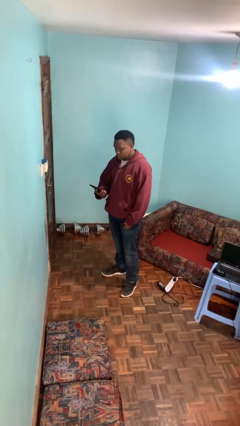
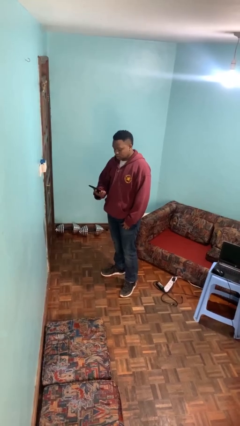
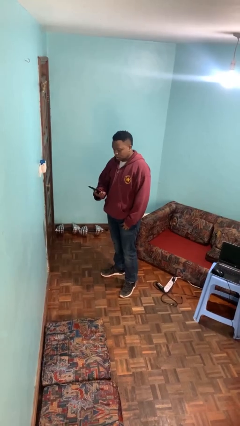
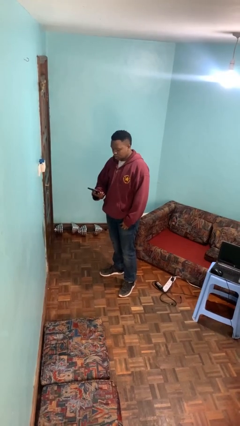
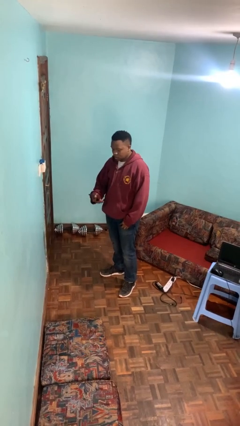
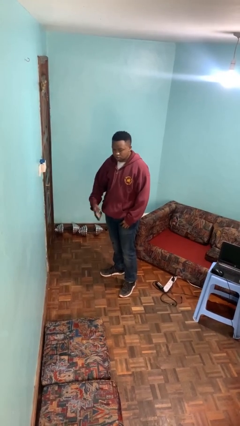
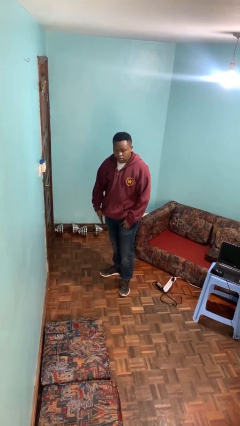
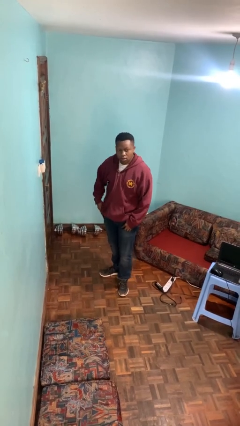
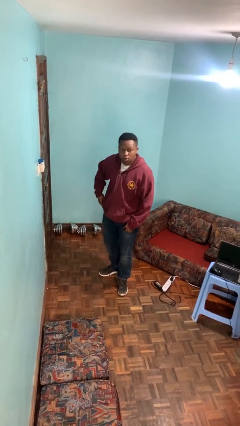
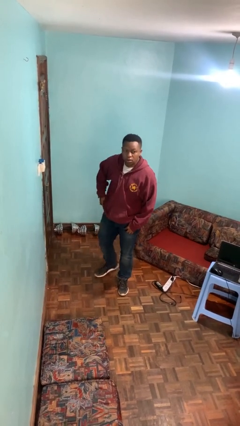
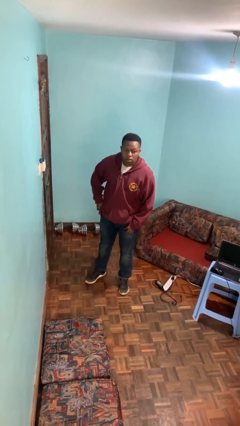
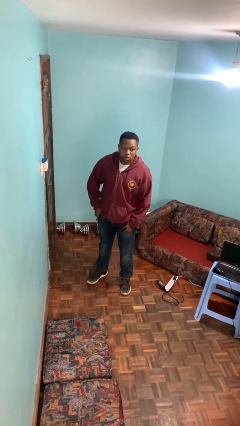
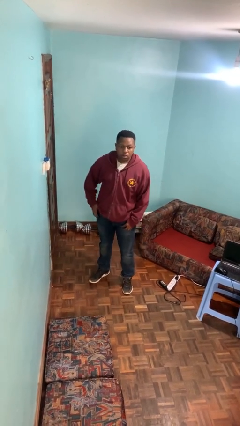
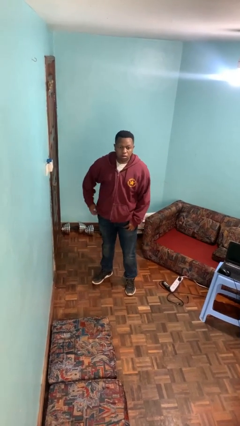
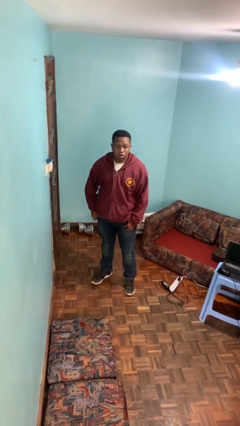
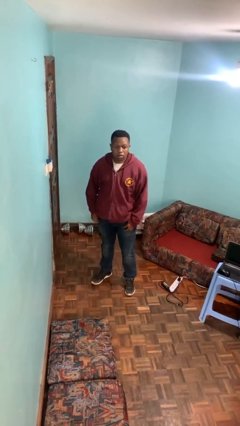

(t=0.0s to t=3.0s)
person puts phone into pocket

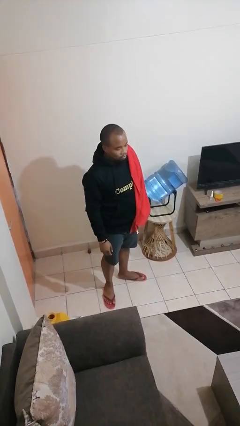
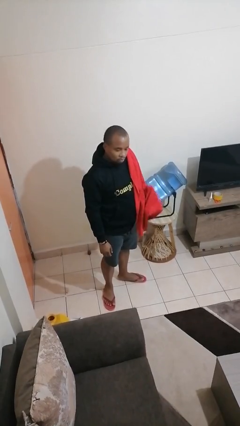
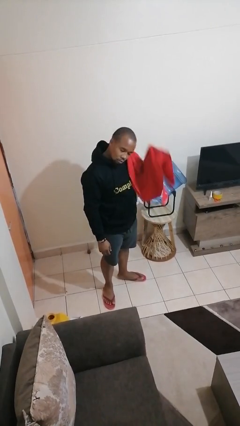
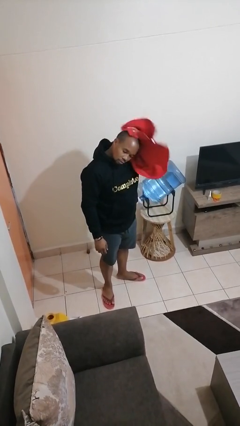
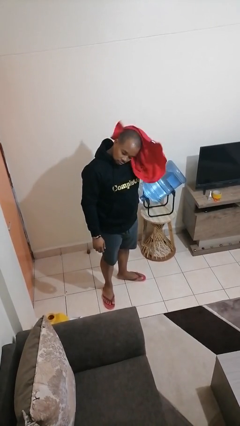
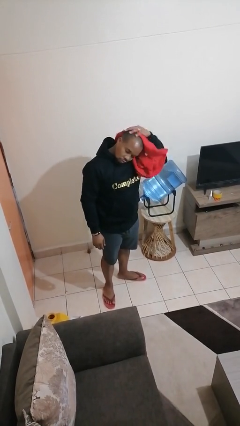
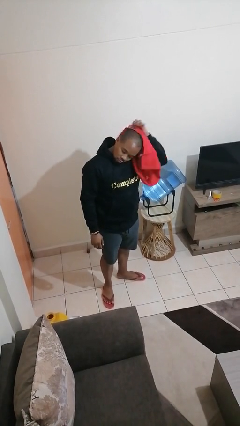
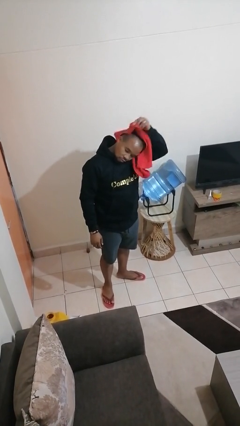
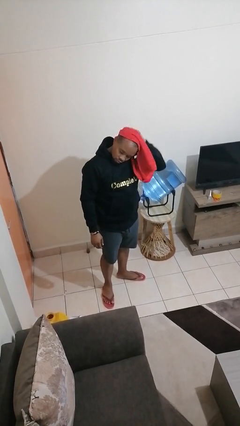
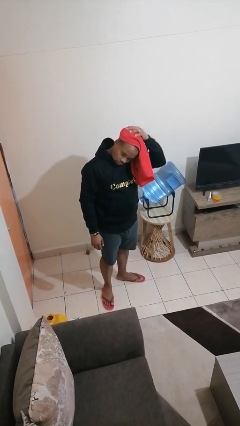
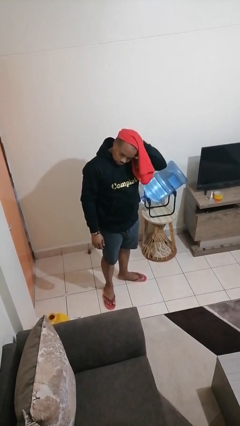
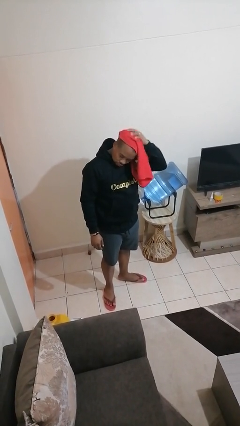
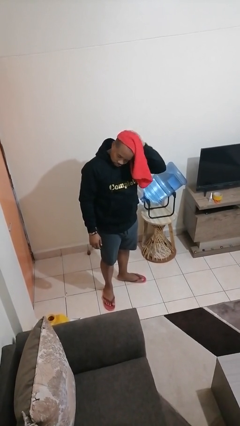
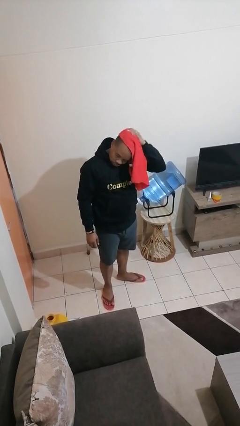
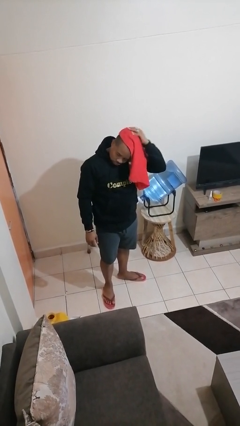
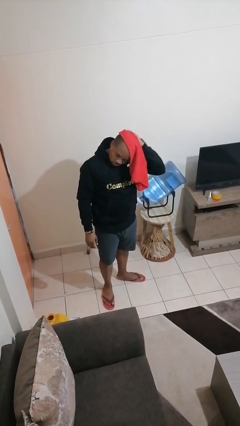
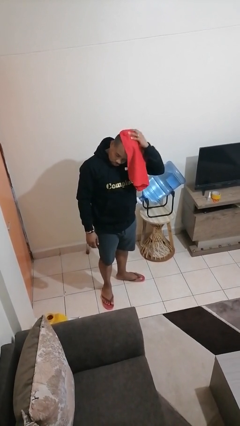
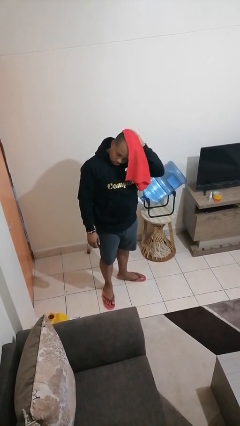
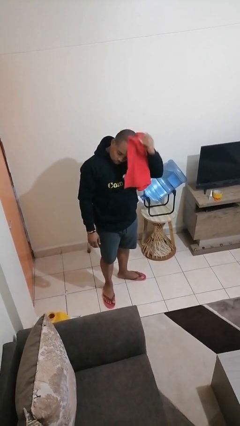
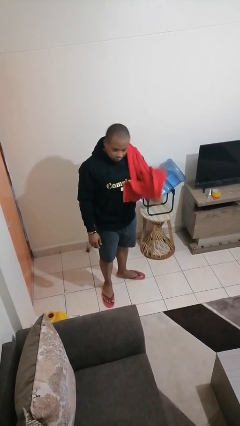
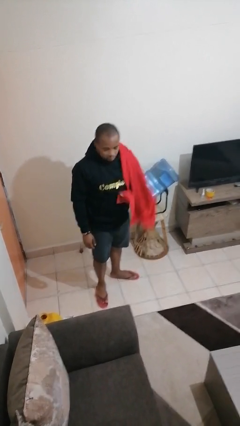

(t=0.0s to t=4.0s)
person dries hair with towel

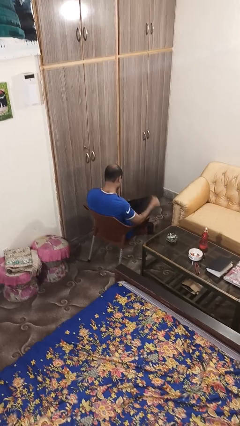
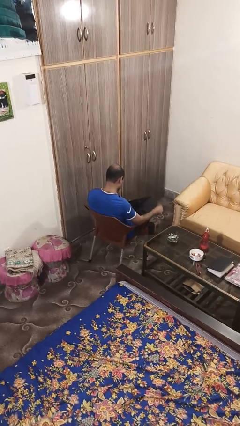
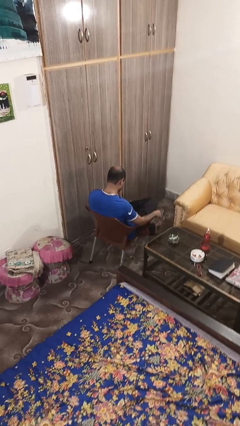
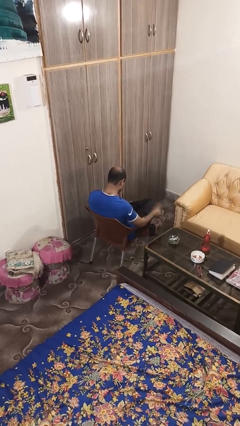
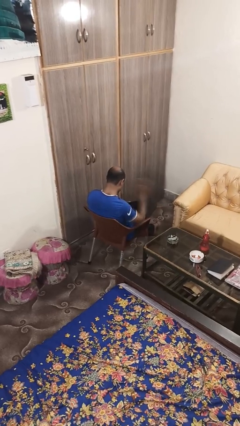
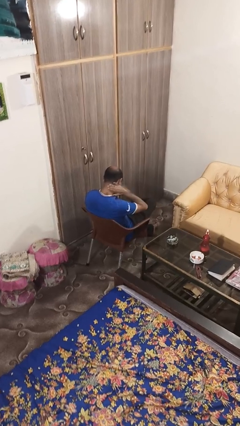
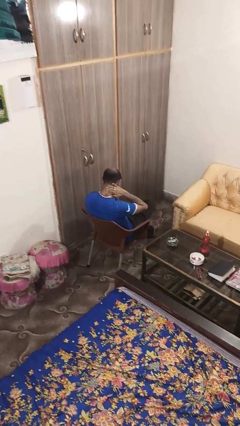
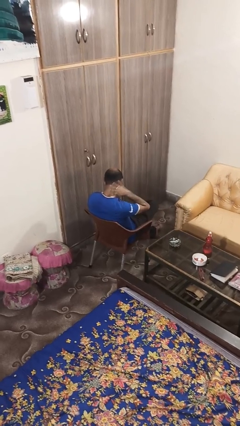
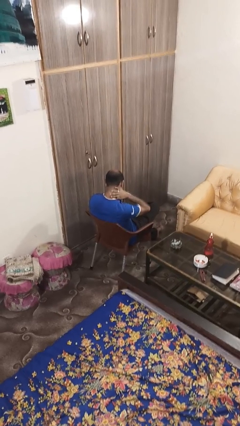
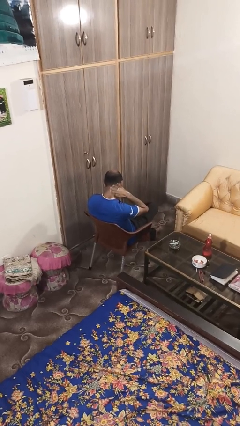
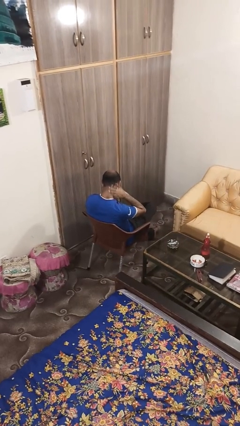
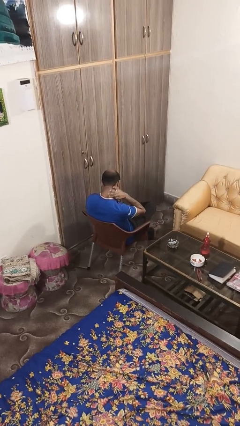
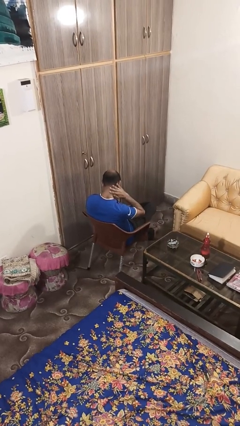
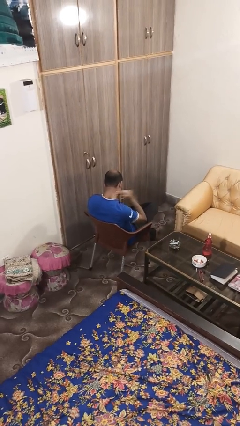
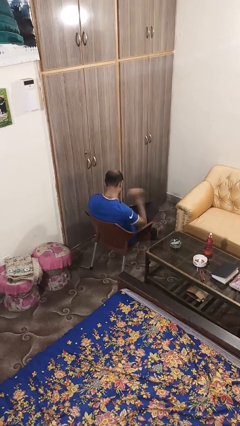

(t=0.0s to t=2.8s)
person swats bug

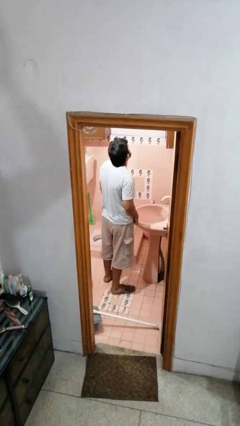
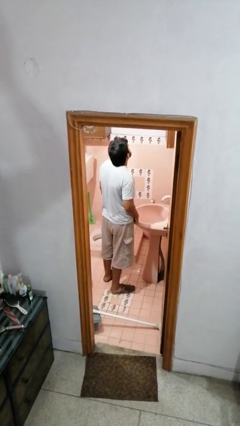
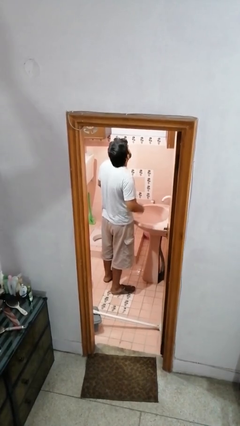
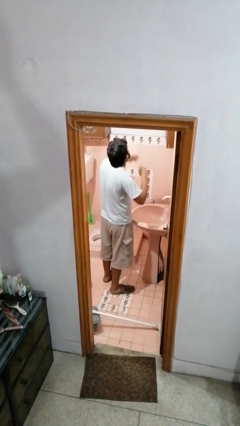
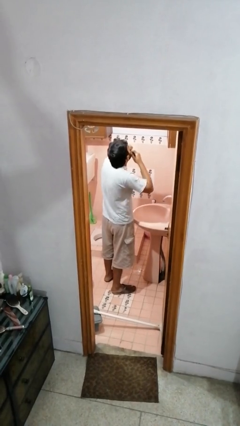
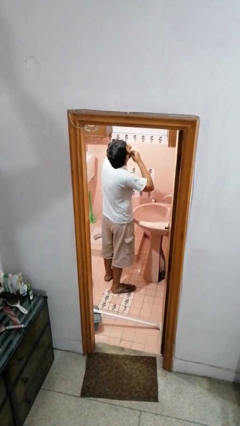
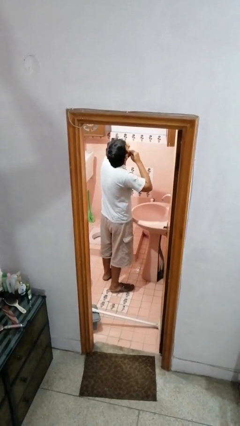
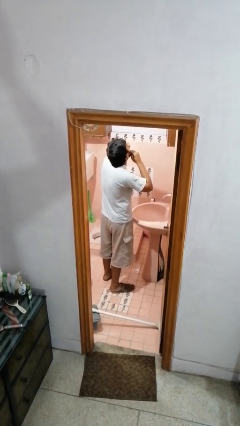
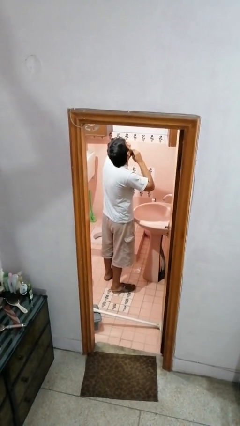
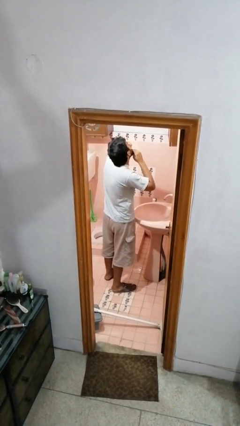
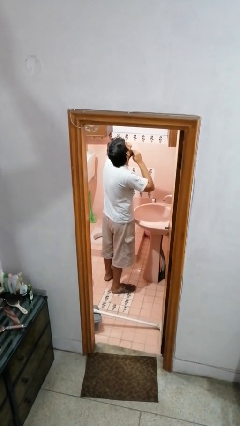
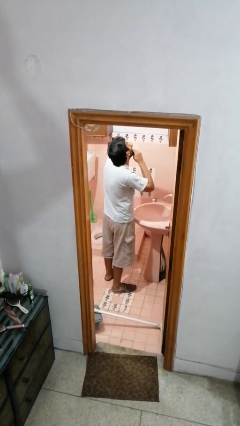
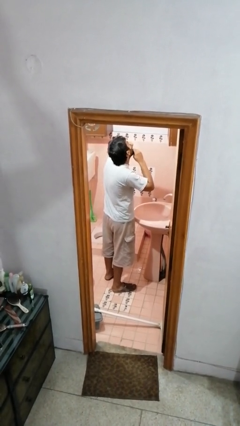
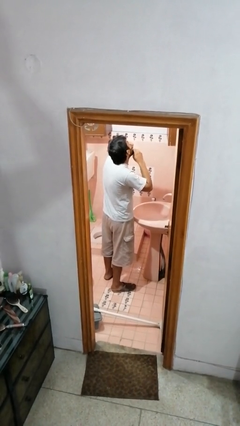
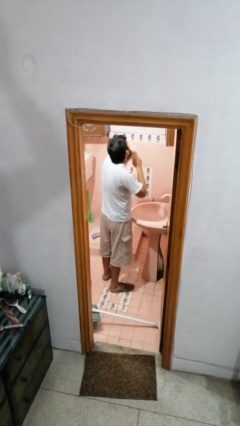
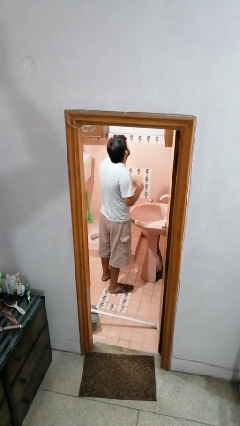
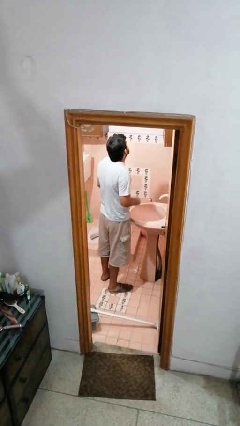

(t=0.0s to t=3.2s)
person flosses

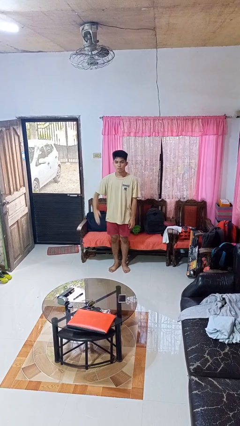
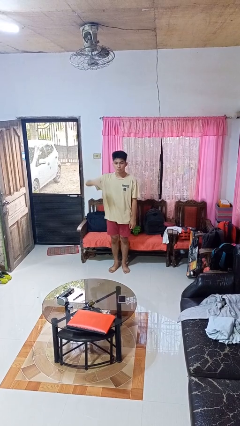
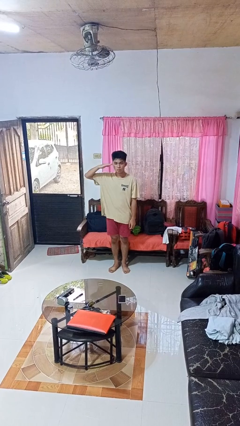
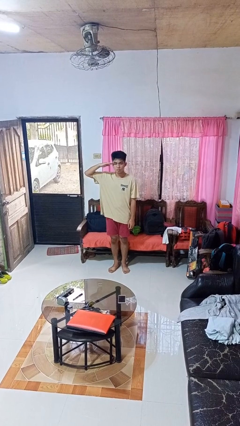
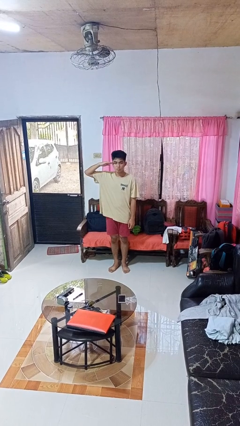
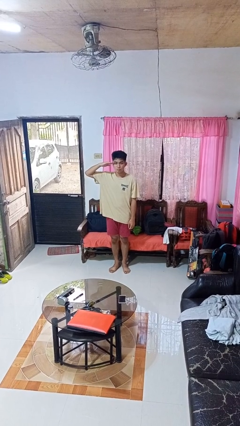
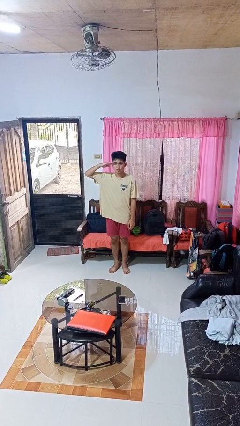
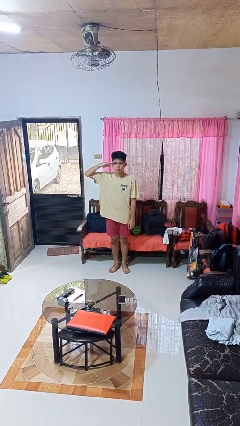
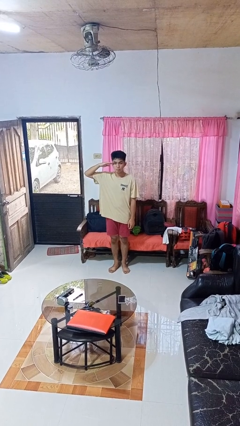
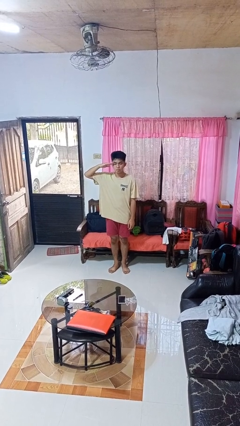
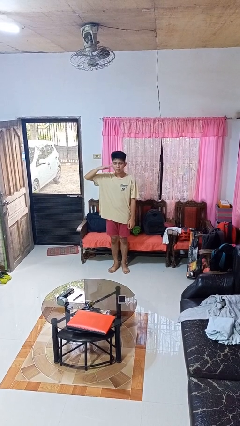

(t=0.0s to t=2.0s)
person salutes

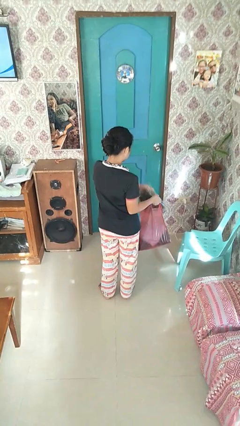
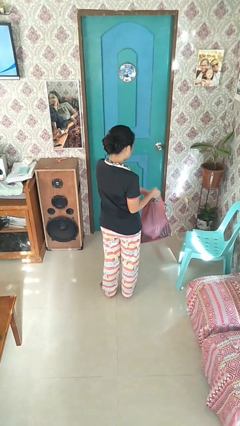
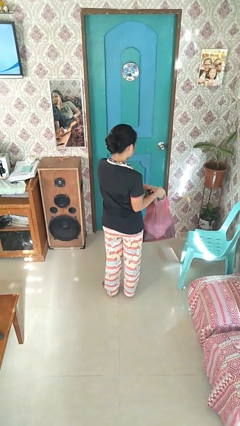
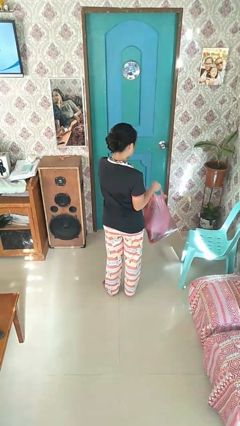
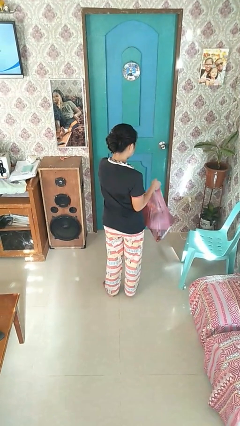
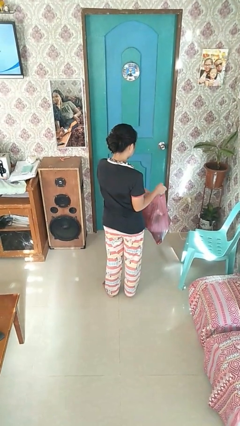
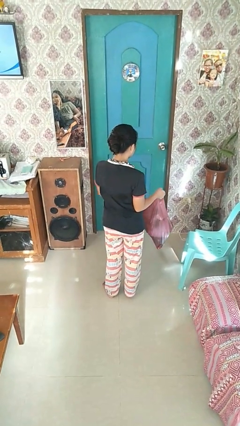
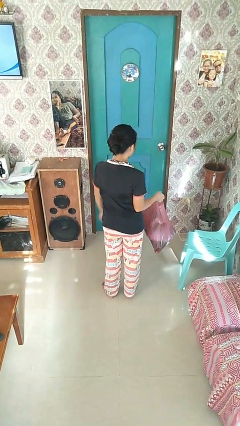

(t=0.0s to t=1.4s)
person puts object into bag

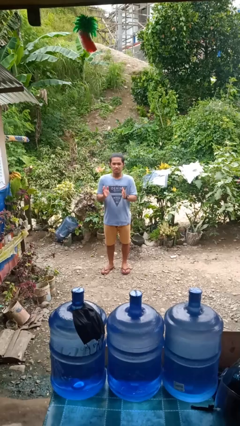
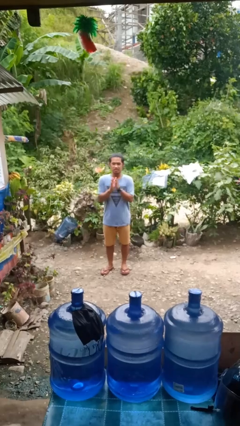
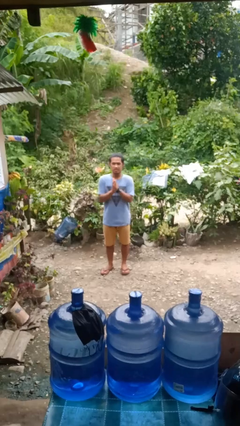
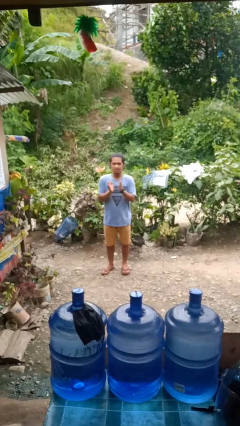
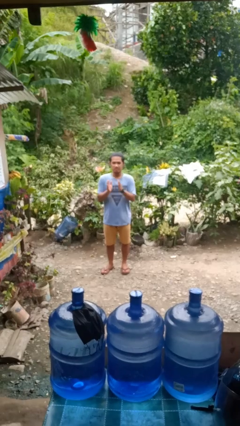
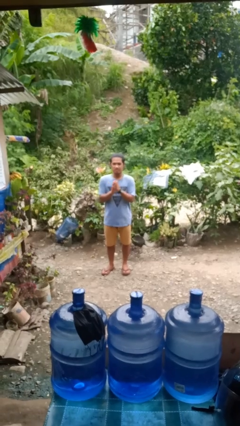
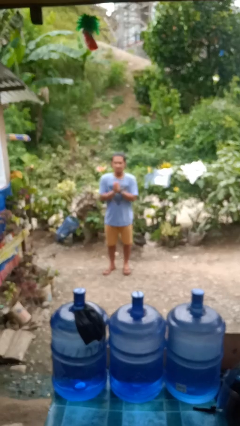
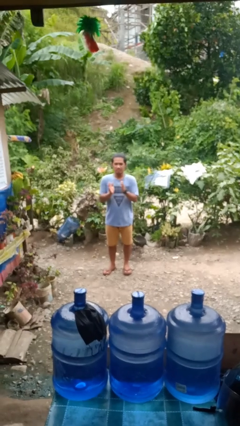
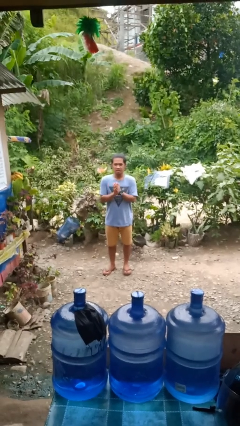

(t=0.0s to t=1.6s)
person claps hands
